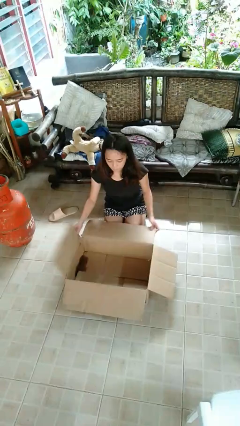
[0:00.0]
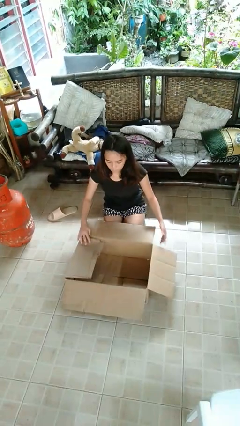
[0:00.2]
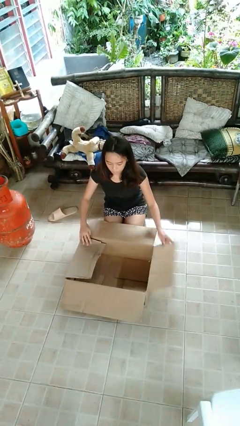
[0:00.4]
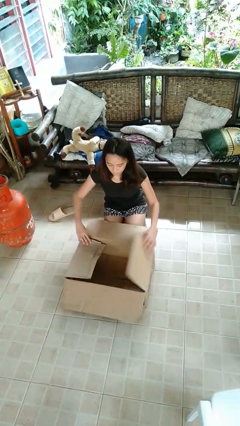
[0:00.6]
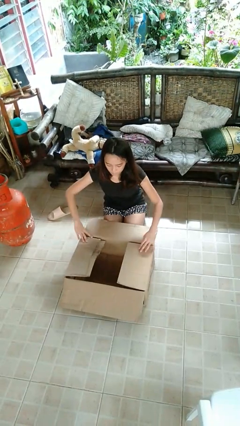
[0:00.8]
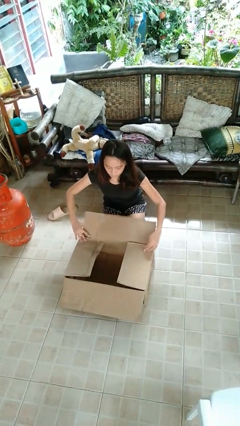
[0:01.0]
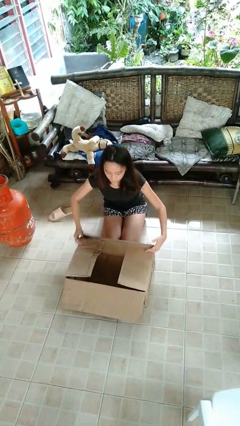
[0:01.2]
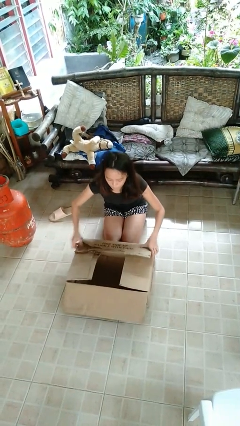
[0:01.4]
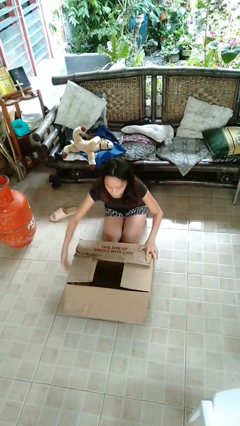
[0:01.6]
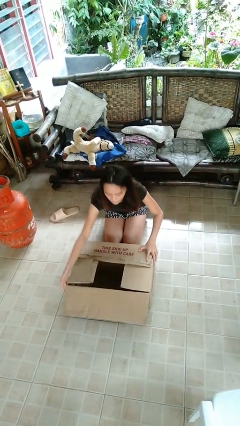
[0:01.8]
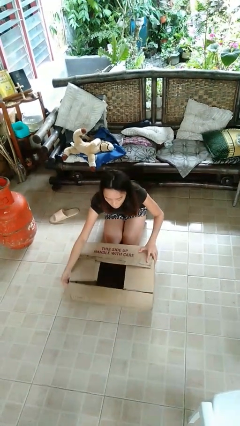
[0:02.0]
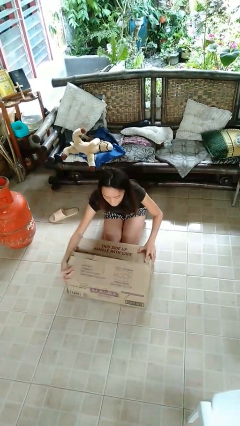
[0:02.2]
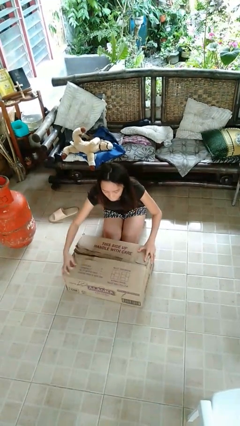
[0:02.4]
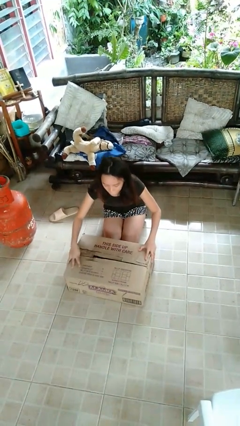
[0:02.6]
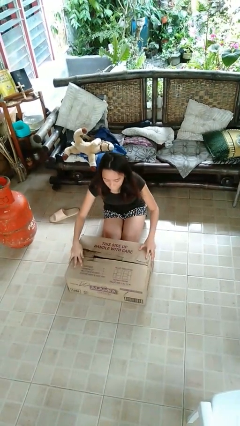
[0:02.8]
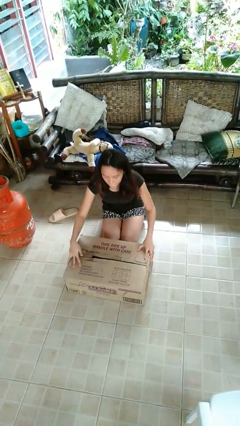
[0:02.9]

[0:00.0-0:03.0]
person closes box

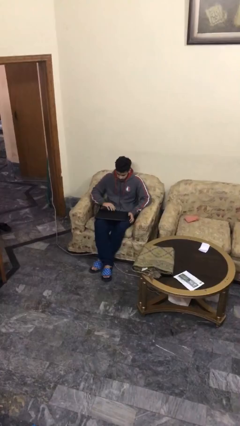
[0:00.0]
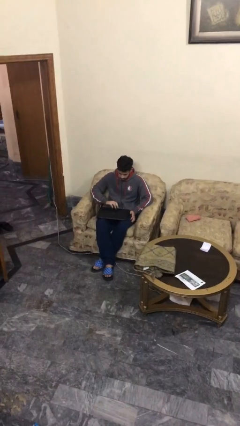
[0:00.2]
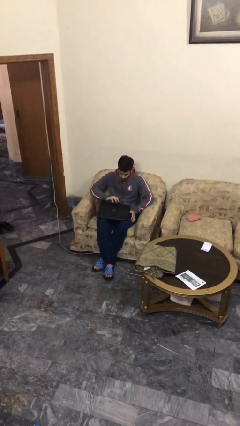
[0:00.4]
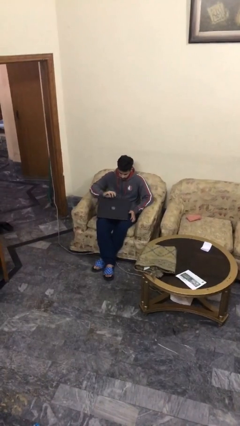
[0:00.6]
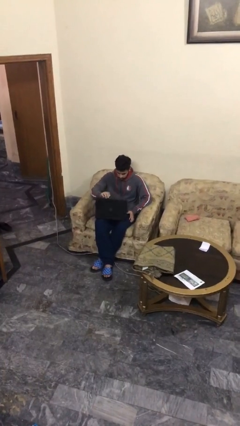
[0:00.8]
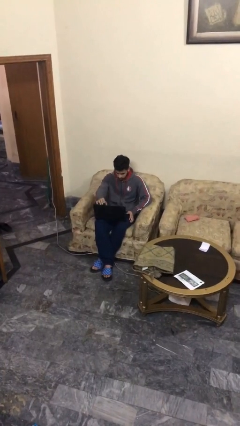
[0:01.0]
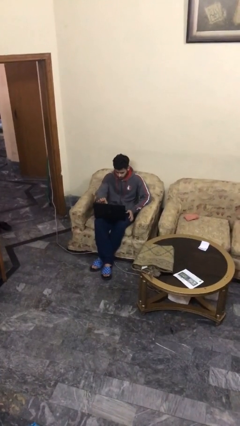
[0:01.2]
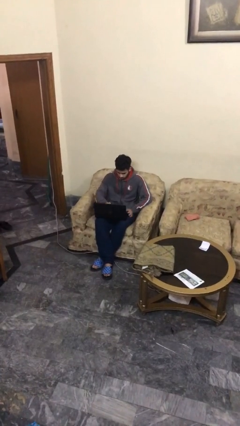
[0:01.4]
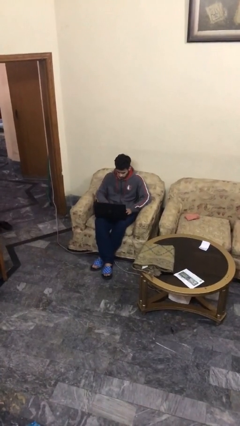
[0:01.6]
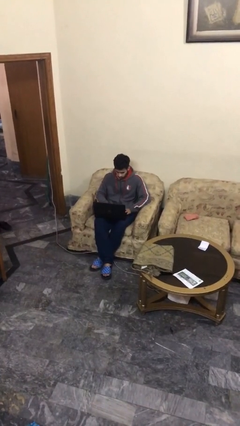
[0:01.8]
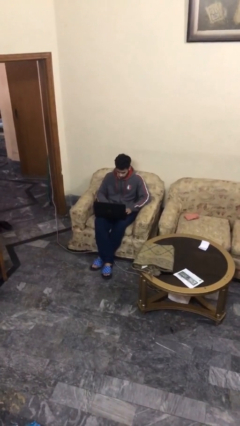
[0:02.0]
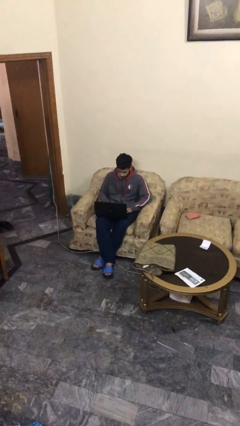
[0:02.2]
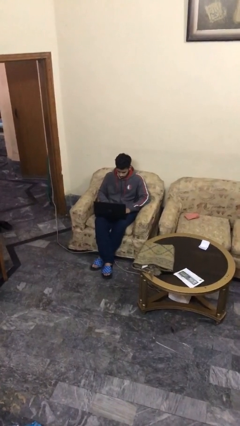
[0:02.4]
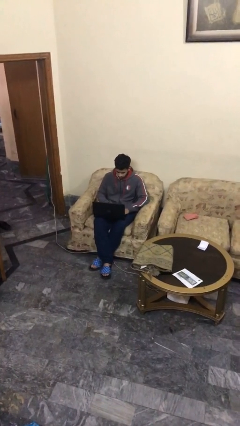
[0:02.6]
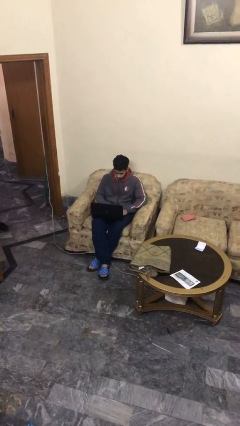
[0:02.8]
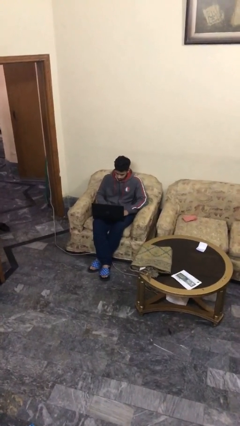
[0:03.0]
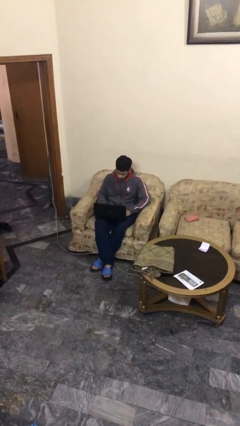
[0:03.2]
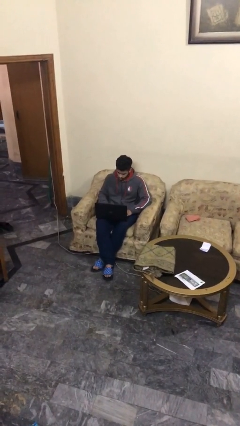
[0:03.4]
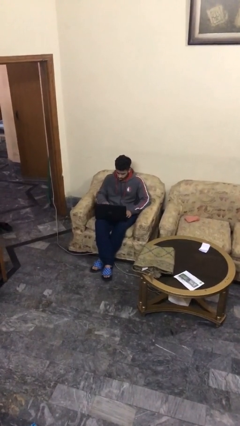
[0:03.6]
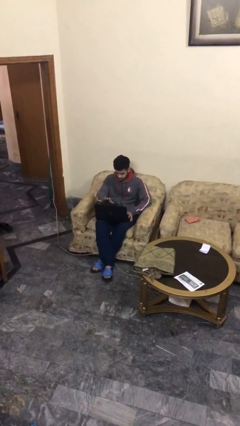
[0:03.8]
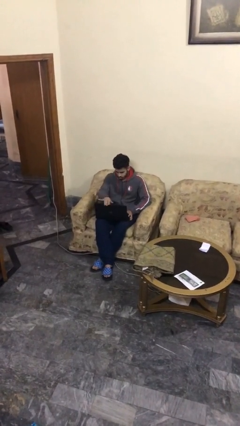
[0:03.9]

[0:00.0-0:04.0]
person interacts with laptop

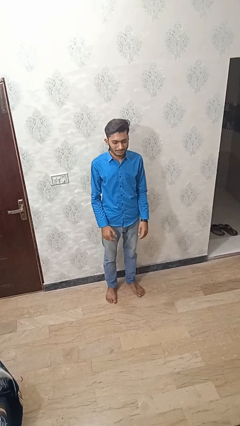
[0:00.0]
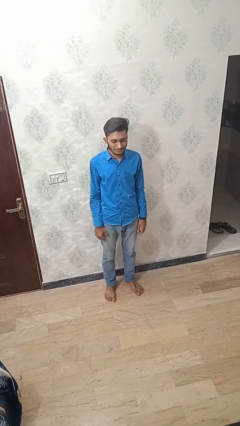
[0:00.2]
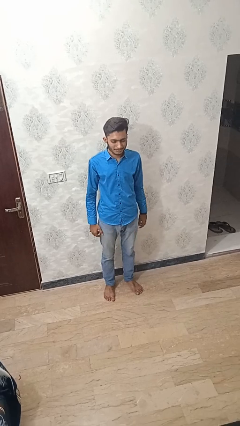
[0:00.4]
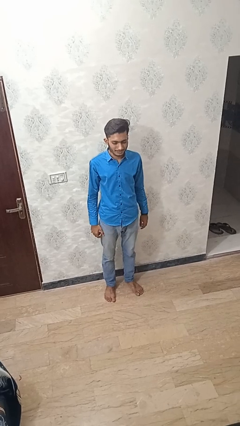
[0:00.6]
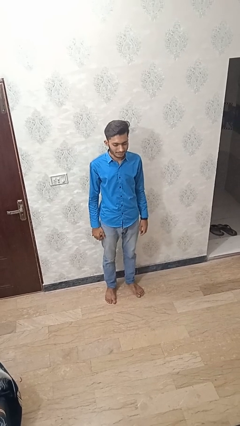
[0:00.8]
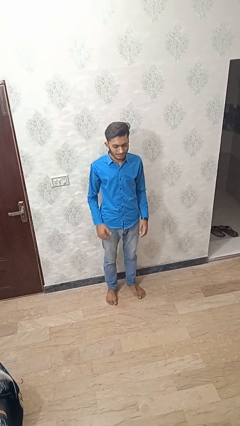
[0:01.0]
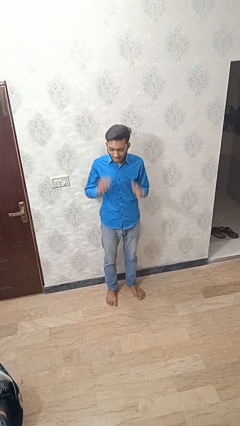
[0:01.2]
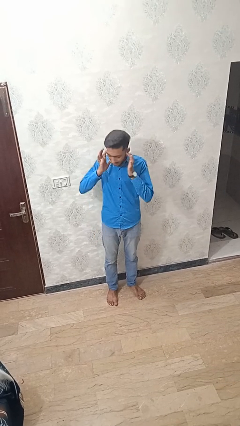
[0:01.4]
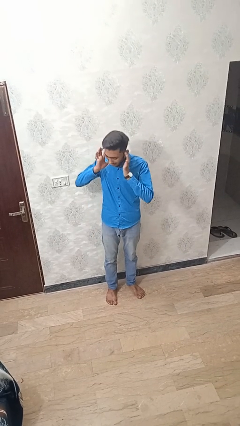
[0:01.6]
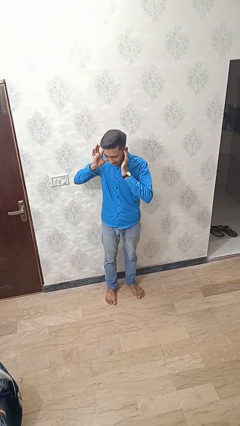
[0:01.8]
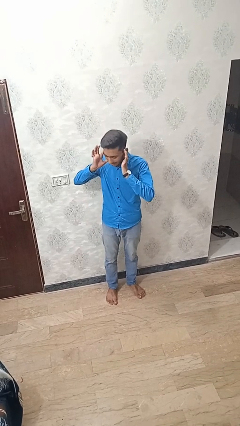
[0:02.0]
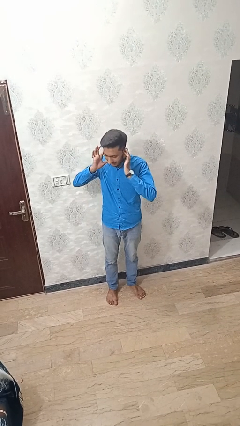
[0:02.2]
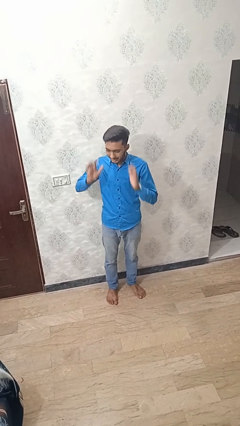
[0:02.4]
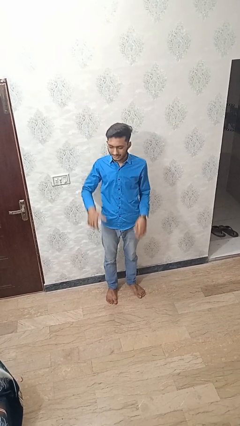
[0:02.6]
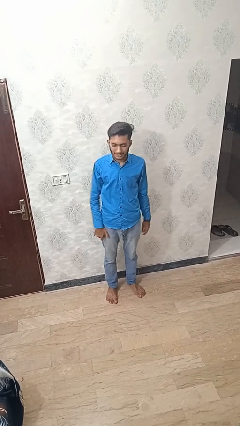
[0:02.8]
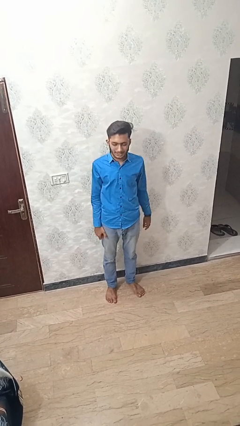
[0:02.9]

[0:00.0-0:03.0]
person puts fingers in ear

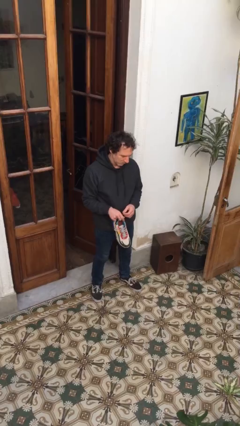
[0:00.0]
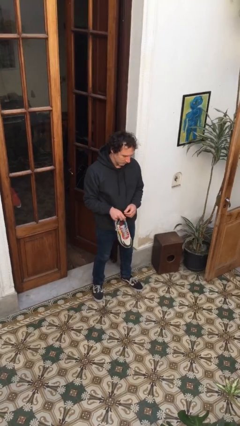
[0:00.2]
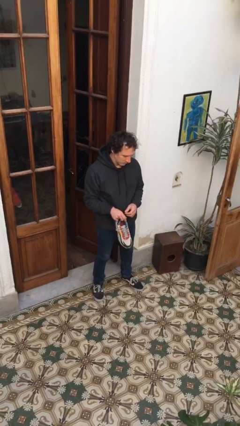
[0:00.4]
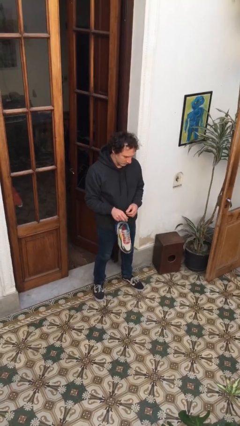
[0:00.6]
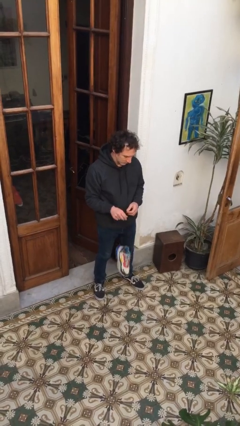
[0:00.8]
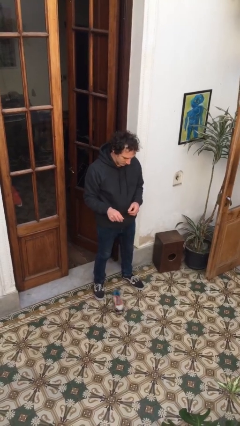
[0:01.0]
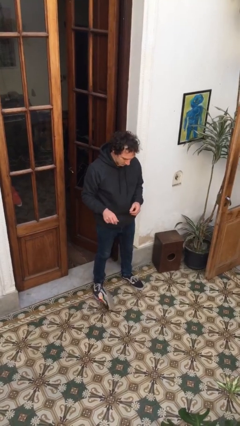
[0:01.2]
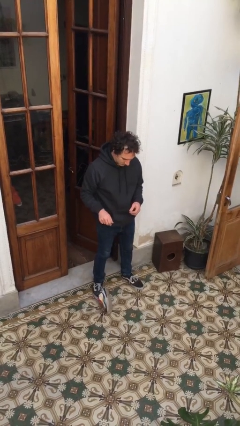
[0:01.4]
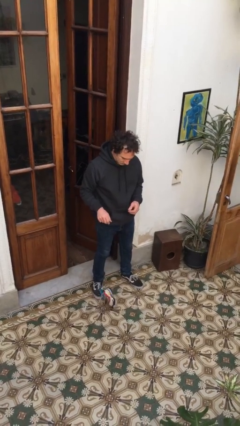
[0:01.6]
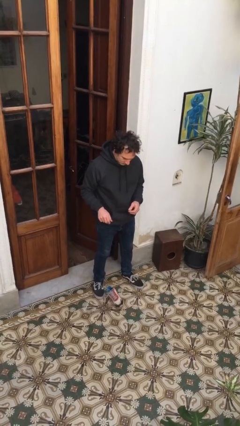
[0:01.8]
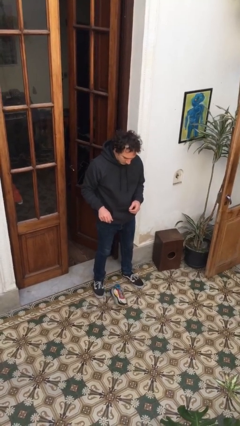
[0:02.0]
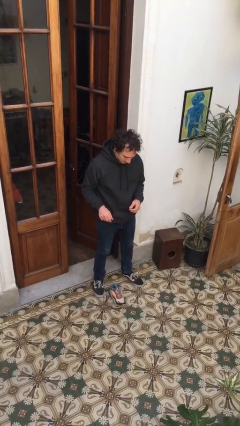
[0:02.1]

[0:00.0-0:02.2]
person drops object

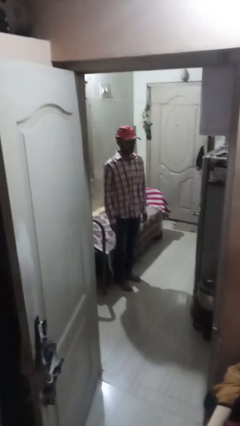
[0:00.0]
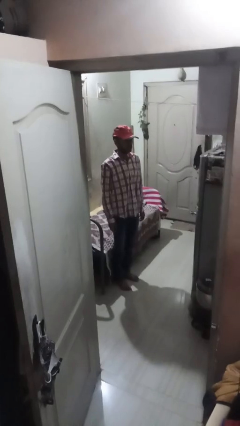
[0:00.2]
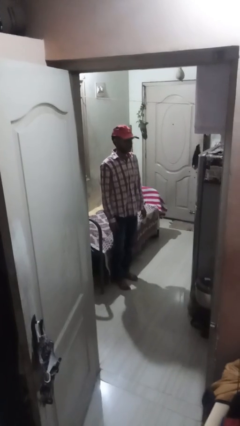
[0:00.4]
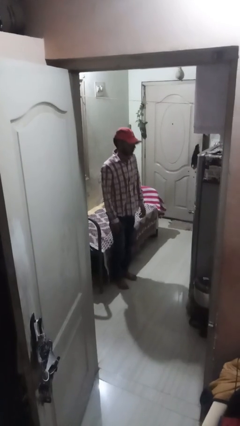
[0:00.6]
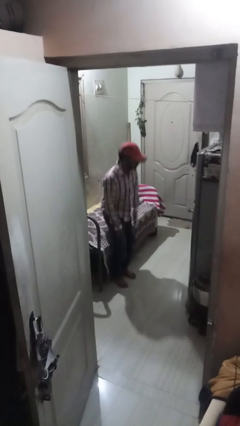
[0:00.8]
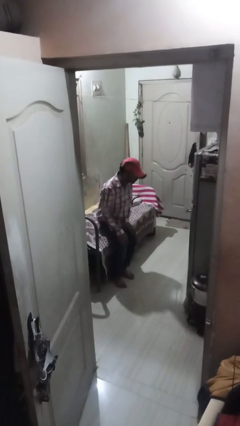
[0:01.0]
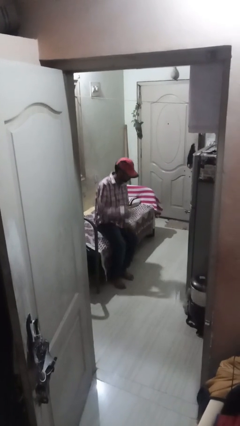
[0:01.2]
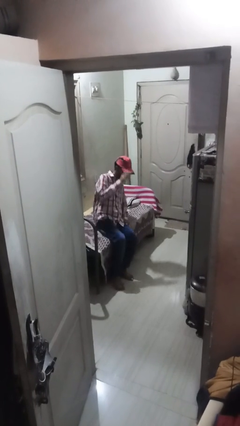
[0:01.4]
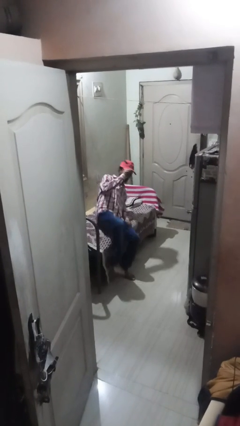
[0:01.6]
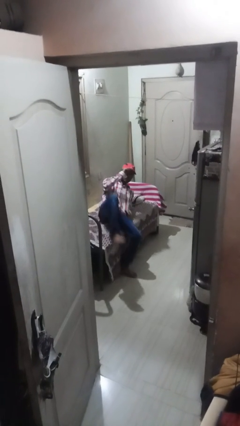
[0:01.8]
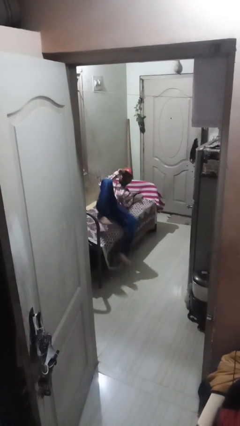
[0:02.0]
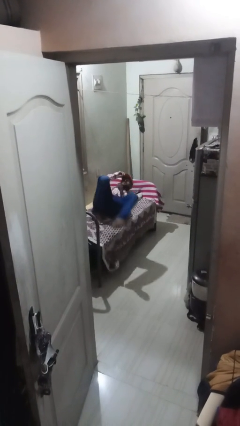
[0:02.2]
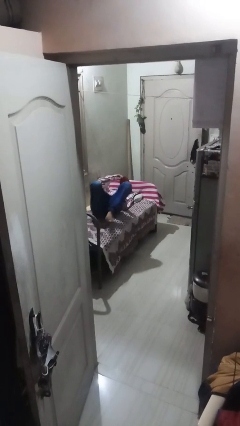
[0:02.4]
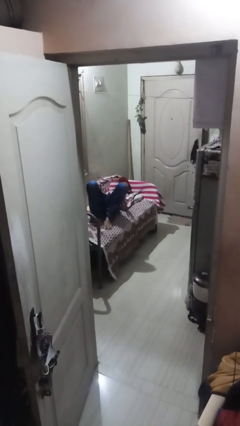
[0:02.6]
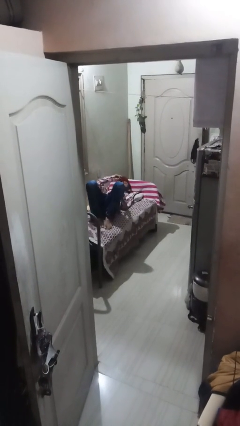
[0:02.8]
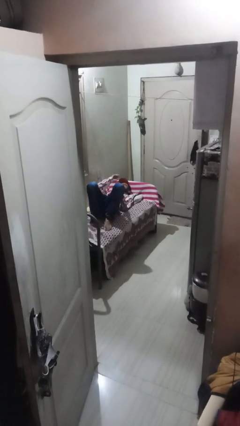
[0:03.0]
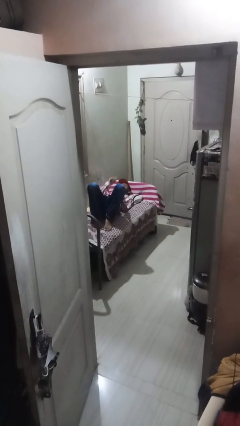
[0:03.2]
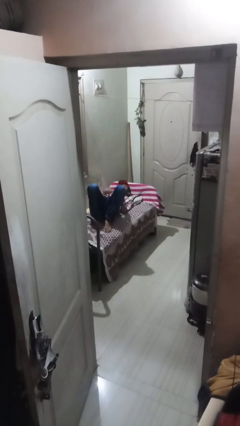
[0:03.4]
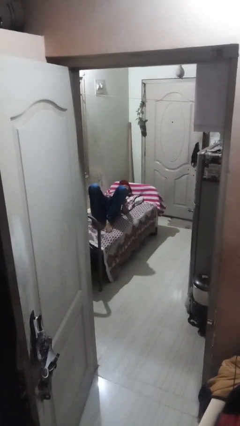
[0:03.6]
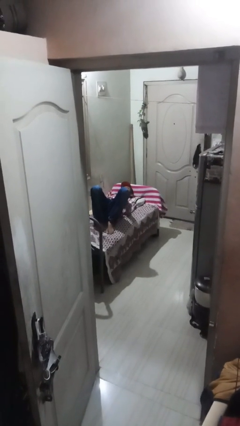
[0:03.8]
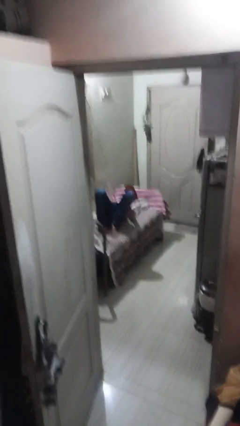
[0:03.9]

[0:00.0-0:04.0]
person lies down on couch

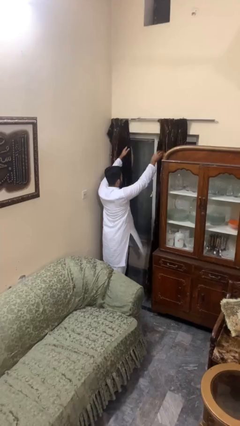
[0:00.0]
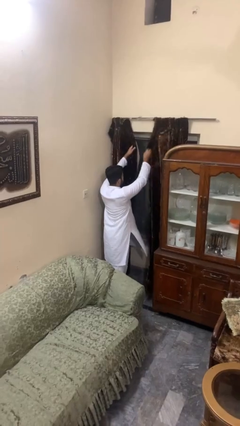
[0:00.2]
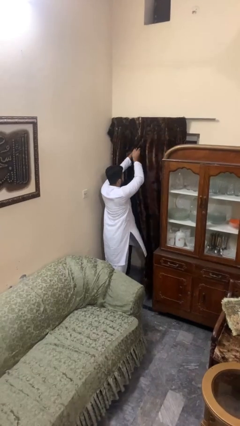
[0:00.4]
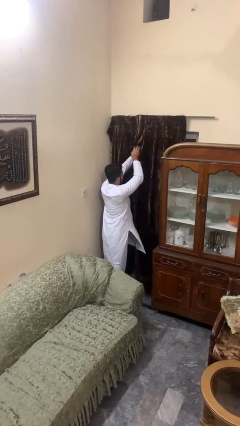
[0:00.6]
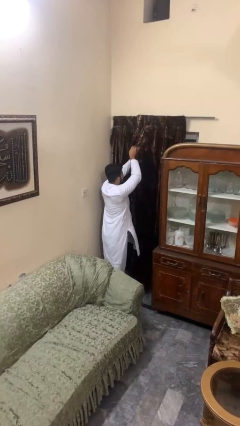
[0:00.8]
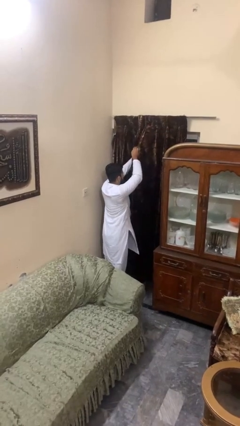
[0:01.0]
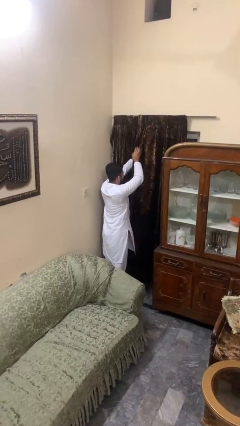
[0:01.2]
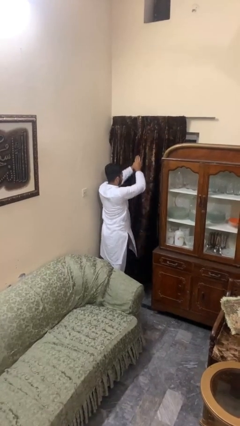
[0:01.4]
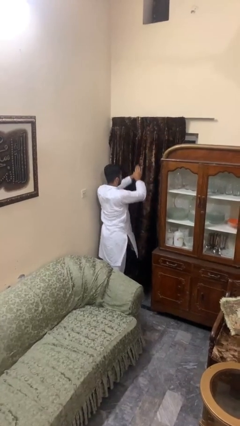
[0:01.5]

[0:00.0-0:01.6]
person closes curtains
